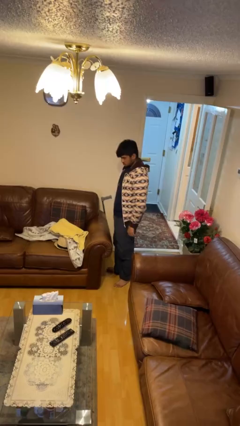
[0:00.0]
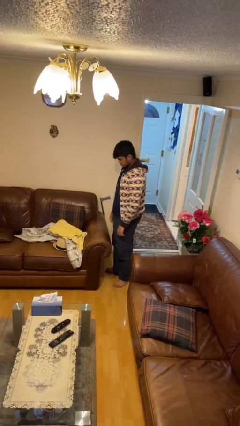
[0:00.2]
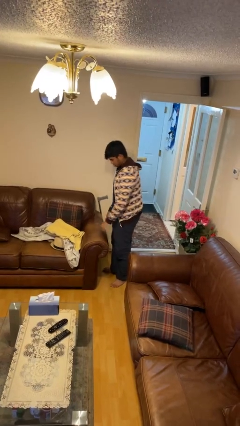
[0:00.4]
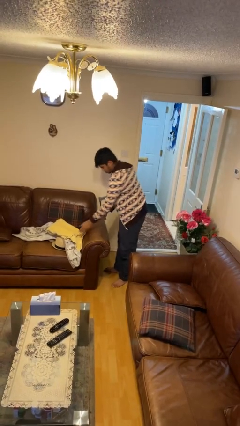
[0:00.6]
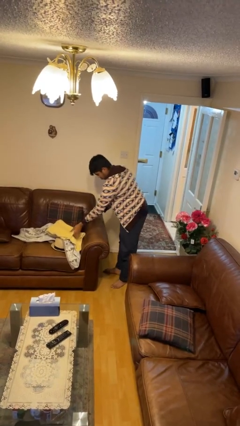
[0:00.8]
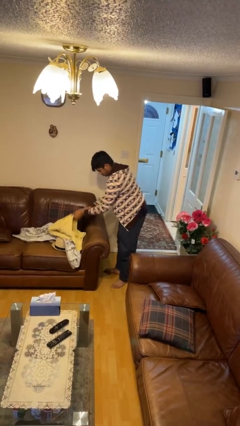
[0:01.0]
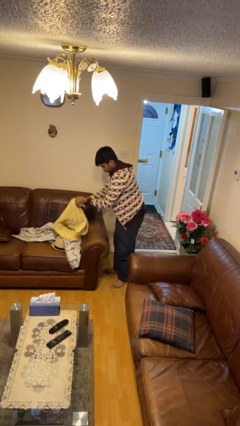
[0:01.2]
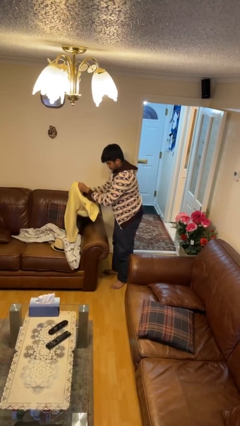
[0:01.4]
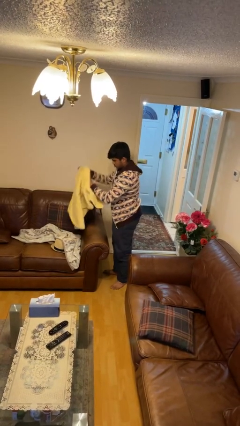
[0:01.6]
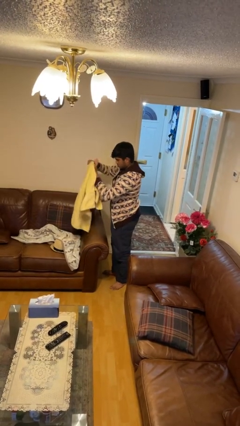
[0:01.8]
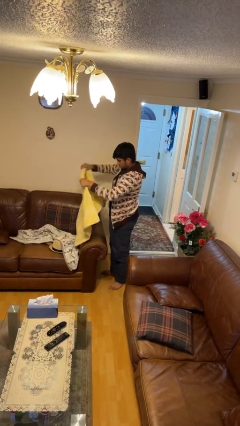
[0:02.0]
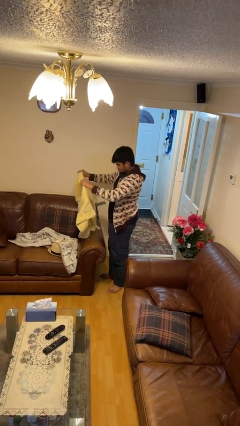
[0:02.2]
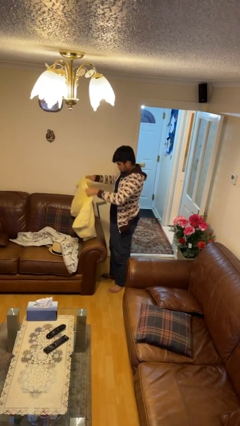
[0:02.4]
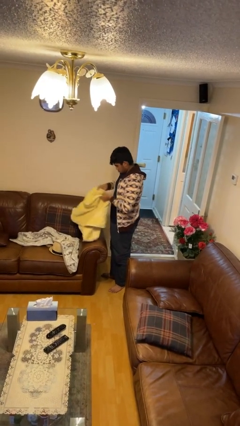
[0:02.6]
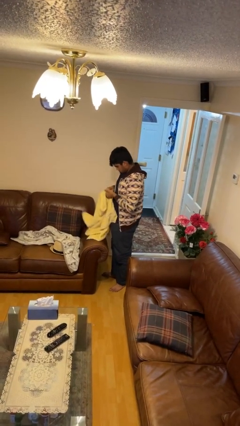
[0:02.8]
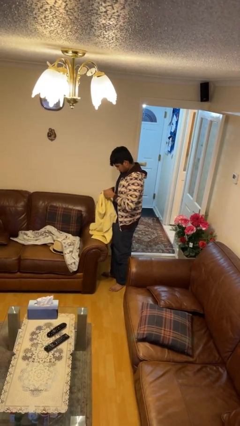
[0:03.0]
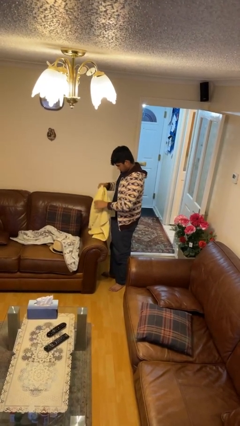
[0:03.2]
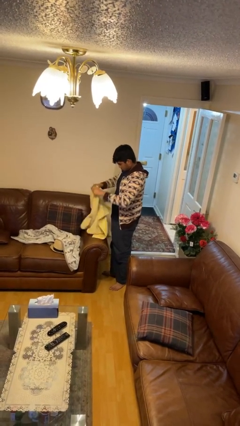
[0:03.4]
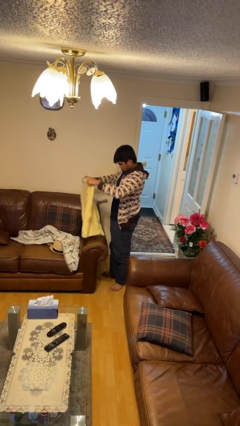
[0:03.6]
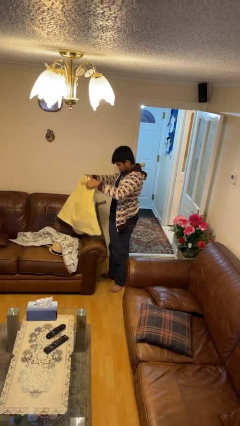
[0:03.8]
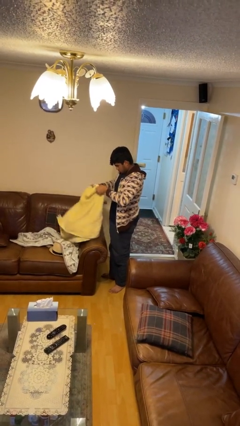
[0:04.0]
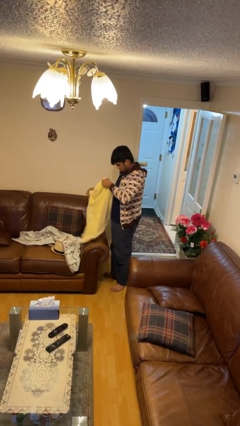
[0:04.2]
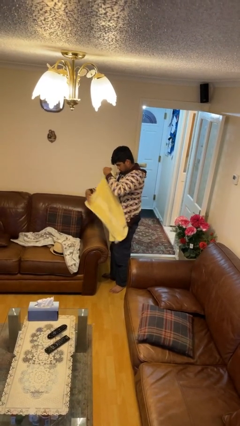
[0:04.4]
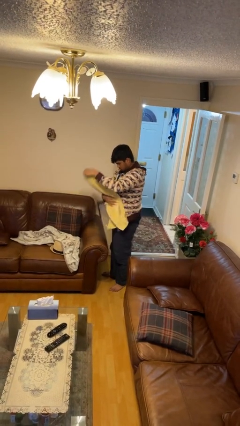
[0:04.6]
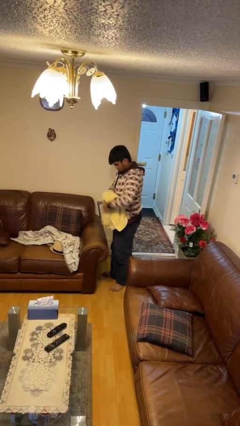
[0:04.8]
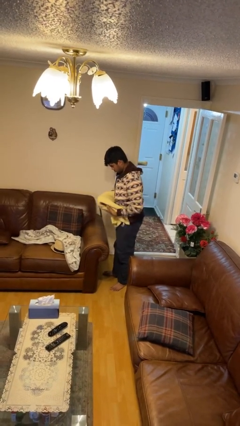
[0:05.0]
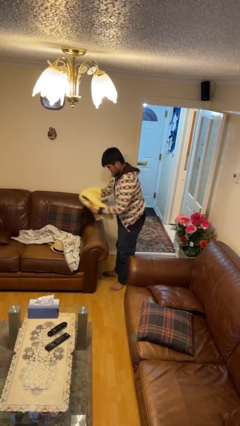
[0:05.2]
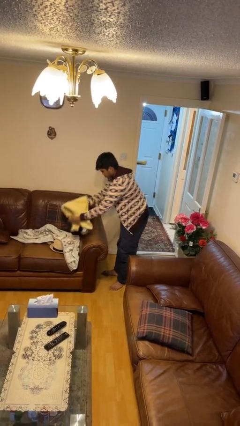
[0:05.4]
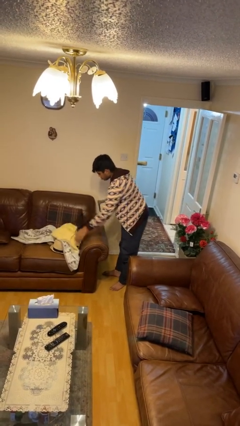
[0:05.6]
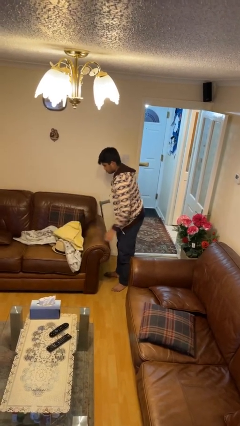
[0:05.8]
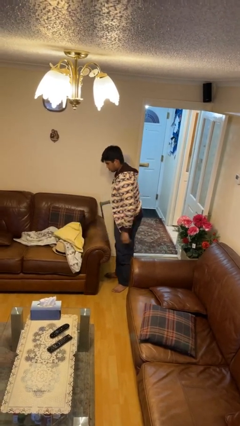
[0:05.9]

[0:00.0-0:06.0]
person folds towel

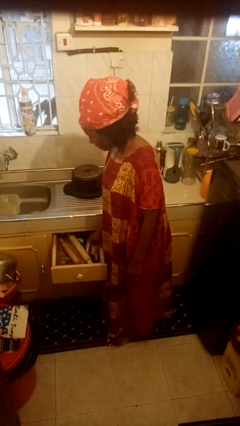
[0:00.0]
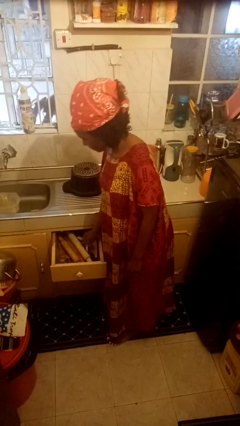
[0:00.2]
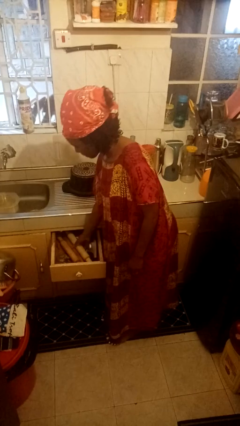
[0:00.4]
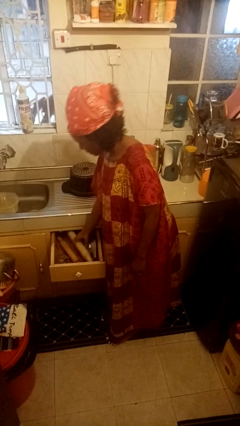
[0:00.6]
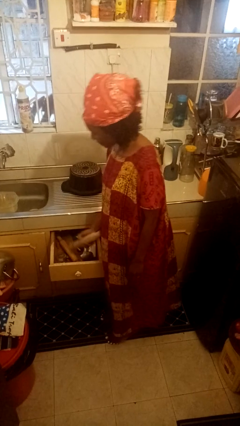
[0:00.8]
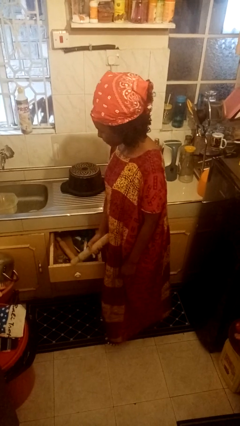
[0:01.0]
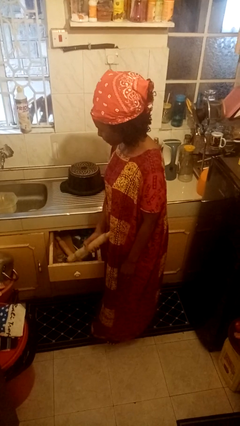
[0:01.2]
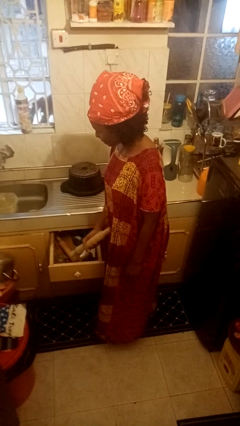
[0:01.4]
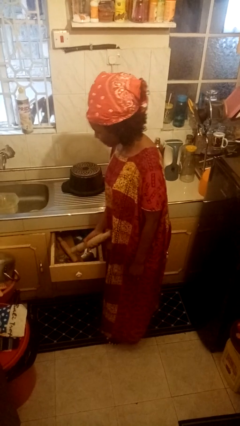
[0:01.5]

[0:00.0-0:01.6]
person takes object from kitchen drawer

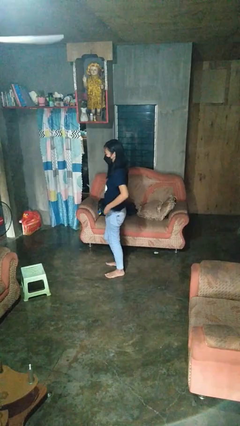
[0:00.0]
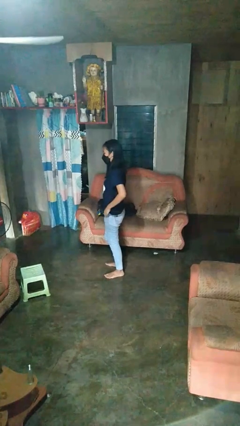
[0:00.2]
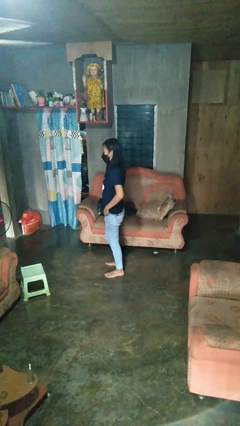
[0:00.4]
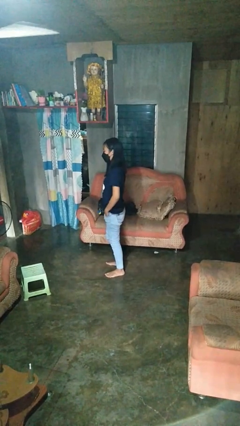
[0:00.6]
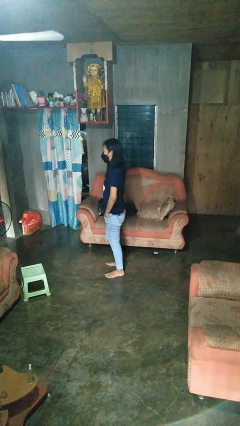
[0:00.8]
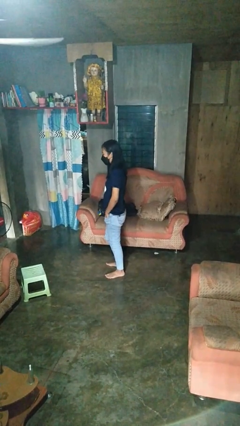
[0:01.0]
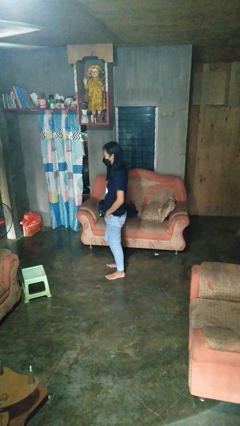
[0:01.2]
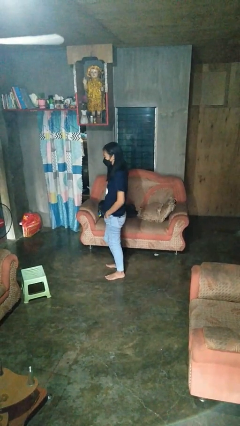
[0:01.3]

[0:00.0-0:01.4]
person puts hands in back pockets

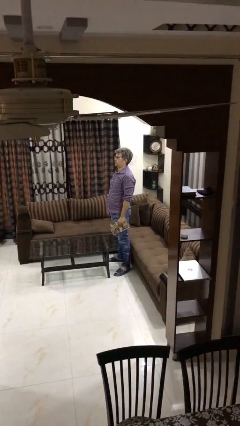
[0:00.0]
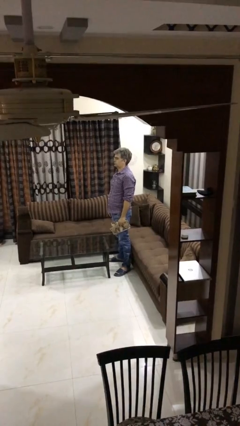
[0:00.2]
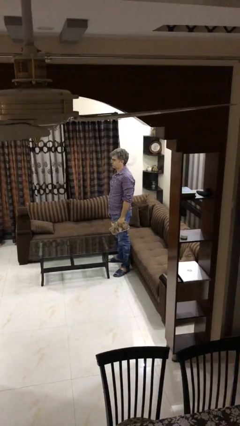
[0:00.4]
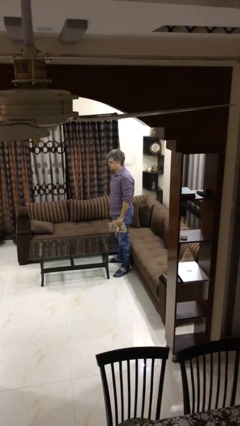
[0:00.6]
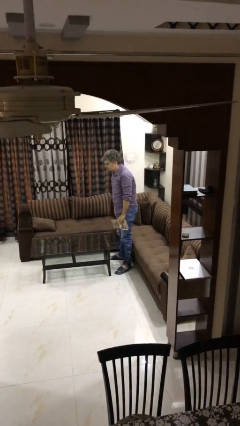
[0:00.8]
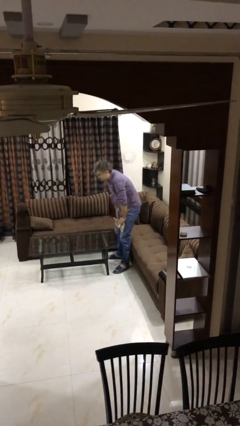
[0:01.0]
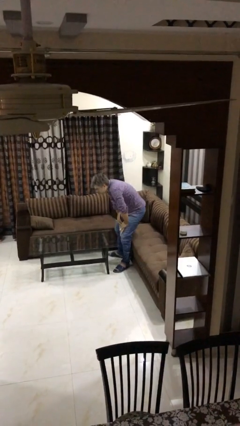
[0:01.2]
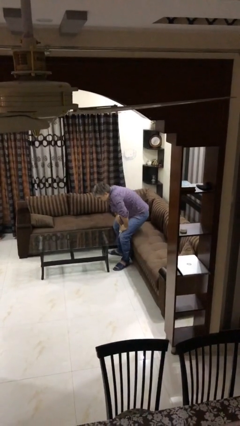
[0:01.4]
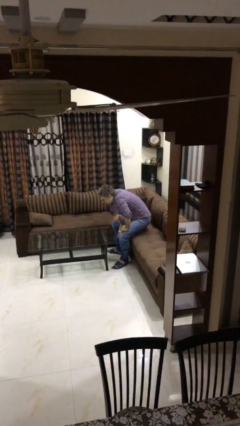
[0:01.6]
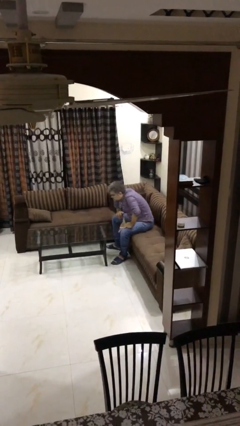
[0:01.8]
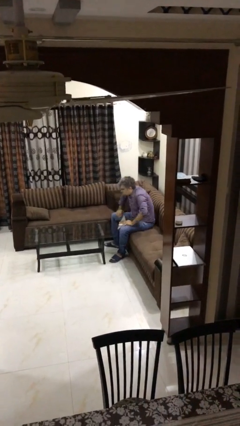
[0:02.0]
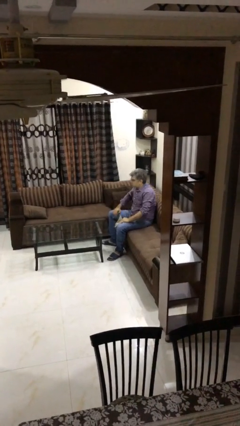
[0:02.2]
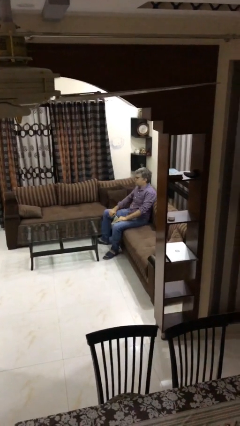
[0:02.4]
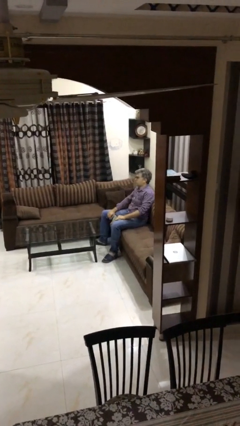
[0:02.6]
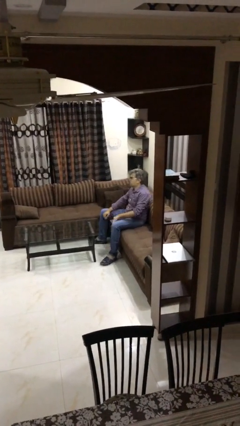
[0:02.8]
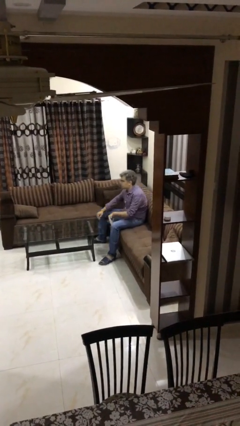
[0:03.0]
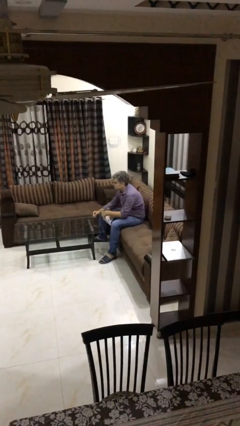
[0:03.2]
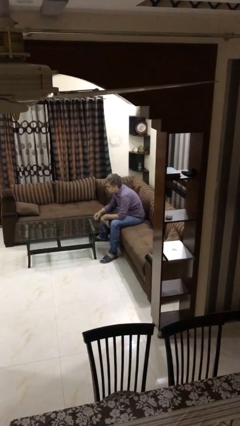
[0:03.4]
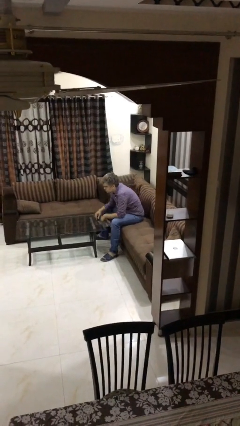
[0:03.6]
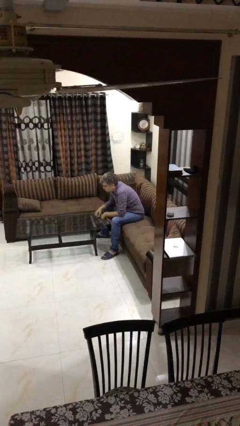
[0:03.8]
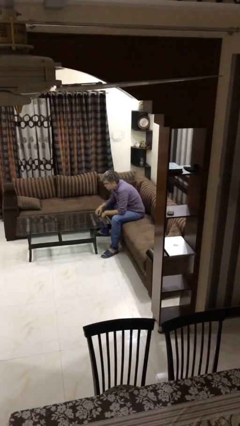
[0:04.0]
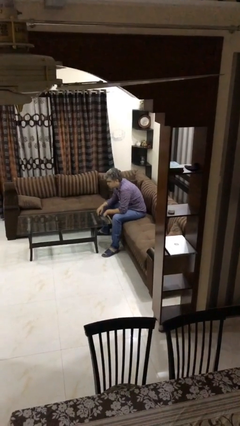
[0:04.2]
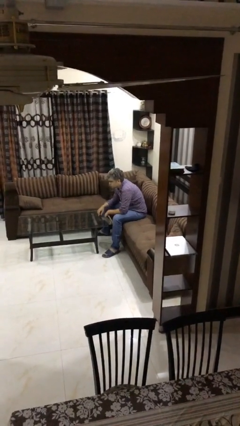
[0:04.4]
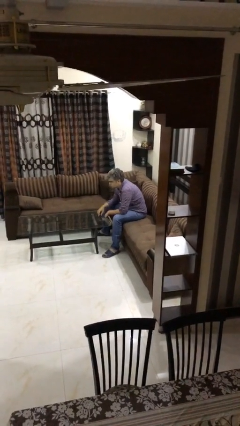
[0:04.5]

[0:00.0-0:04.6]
person sits down

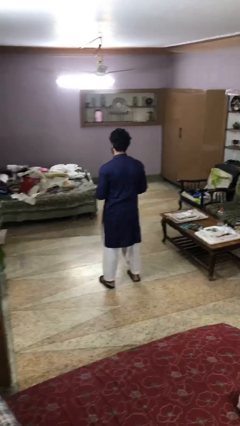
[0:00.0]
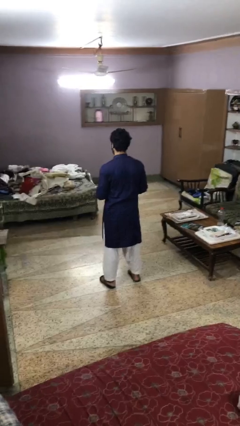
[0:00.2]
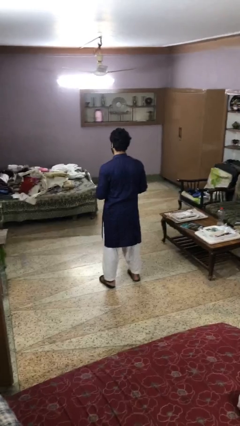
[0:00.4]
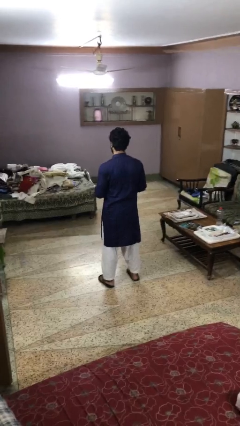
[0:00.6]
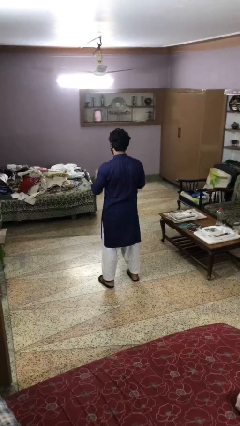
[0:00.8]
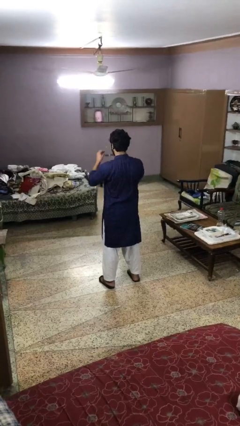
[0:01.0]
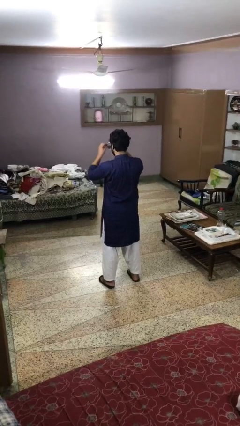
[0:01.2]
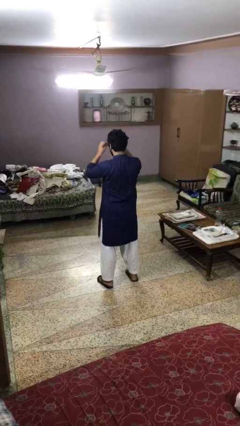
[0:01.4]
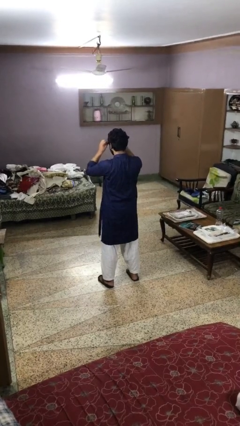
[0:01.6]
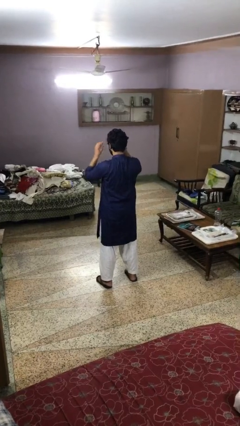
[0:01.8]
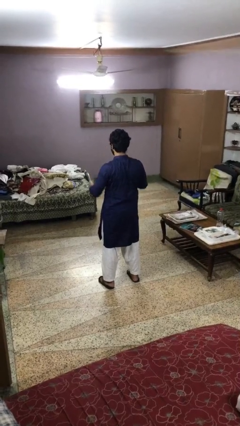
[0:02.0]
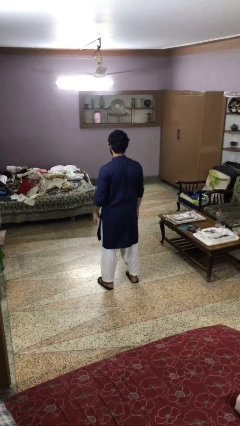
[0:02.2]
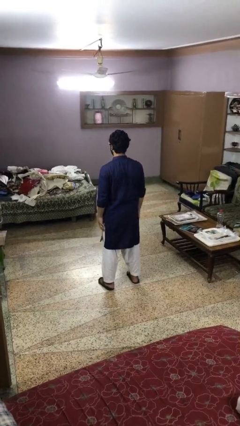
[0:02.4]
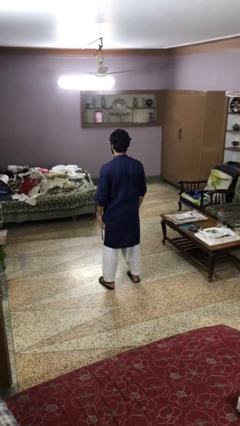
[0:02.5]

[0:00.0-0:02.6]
person puts on sunglasses

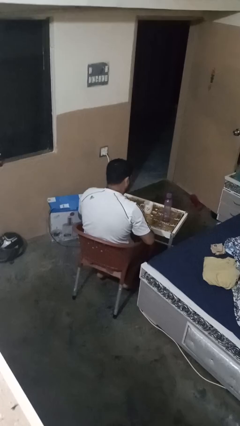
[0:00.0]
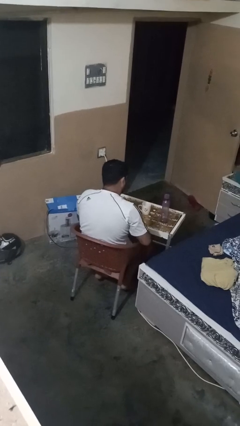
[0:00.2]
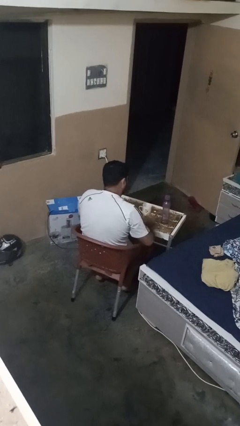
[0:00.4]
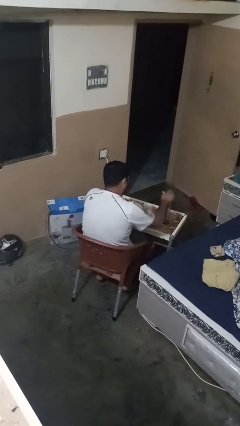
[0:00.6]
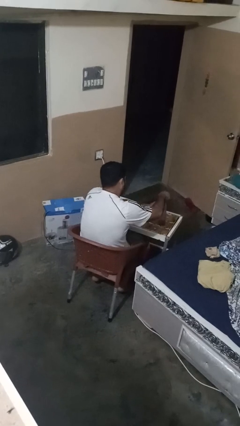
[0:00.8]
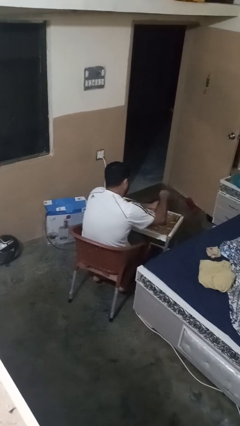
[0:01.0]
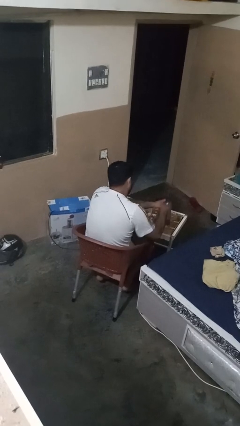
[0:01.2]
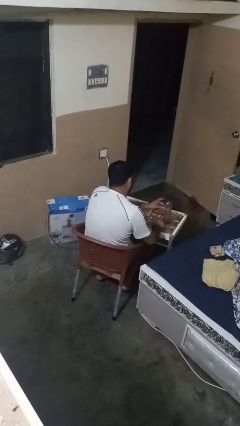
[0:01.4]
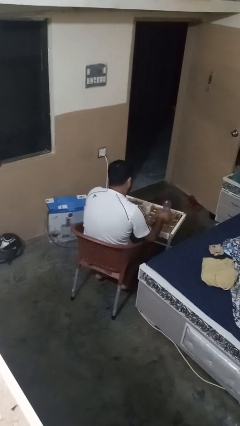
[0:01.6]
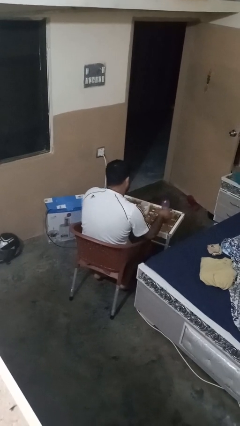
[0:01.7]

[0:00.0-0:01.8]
person unscrews lid from bottle
